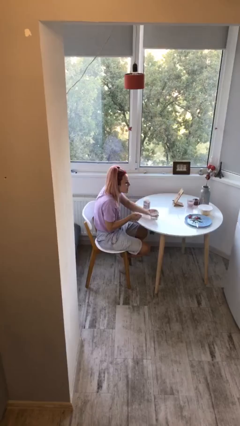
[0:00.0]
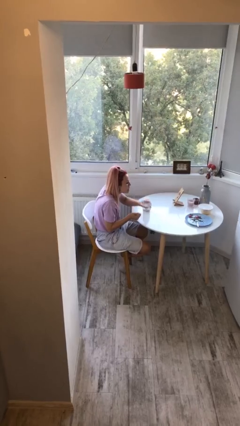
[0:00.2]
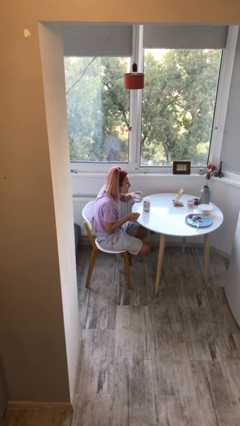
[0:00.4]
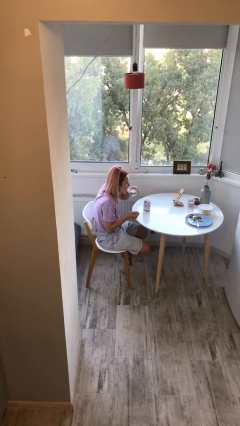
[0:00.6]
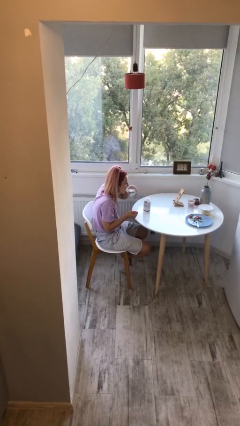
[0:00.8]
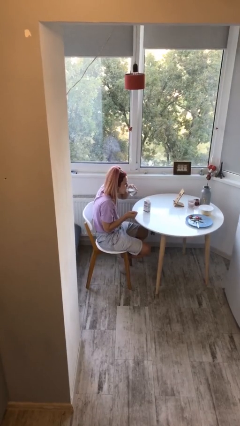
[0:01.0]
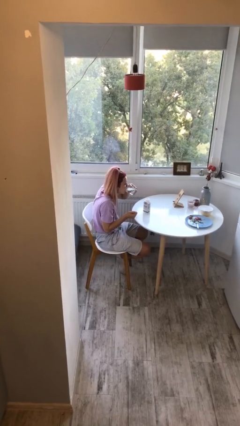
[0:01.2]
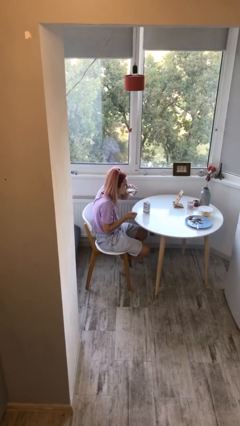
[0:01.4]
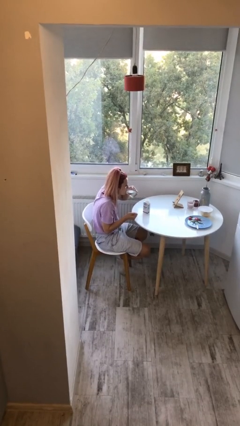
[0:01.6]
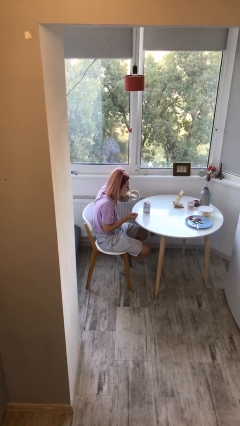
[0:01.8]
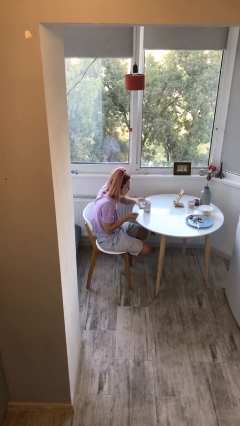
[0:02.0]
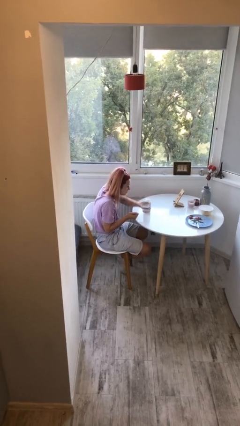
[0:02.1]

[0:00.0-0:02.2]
person drinks from cup

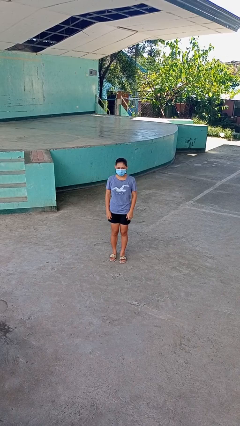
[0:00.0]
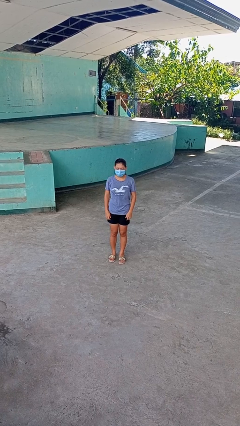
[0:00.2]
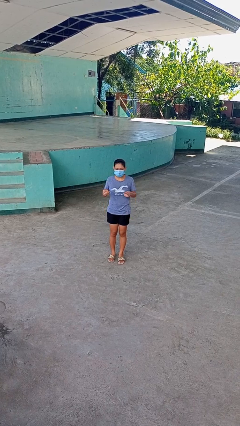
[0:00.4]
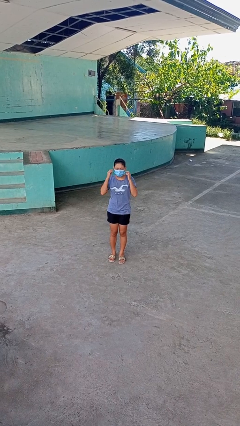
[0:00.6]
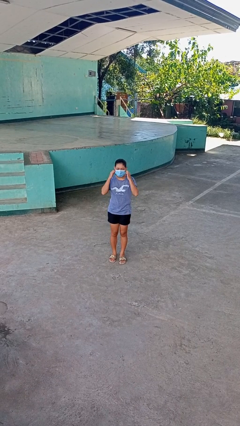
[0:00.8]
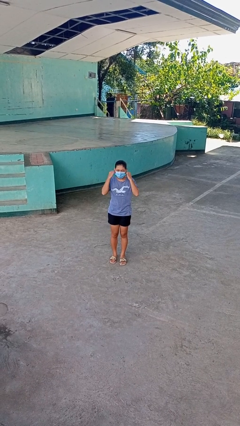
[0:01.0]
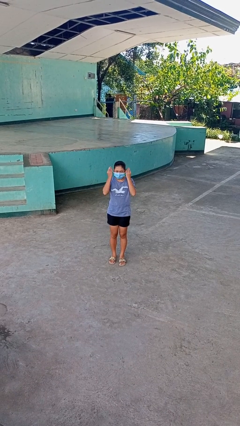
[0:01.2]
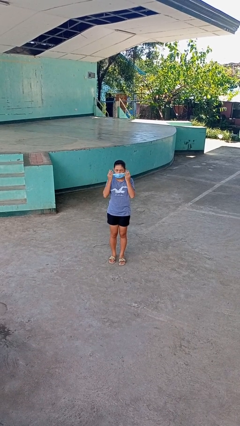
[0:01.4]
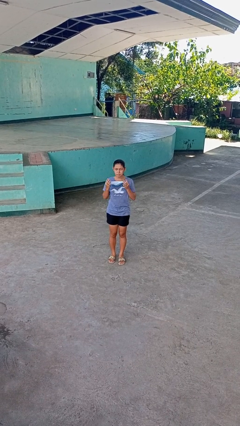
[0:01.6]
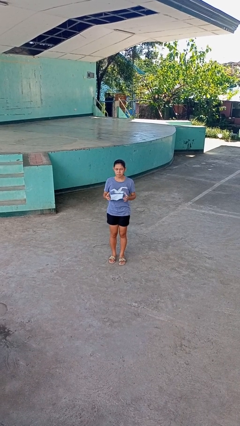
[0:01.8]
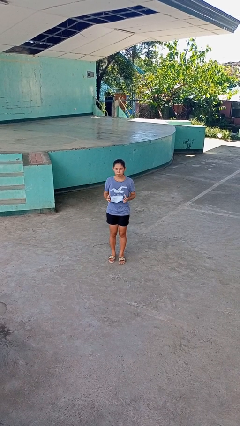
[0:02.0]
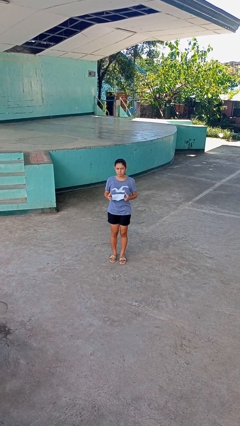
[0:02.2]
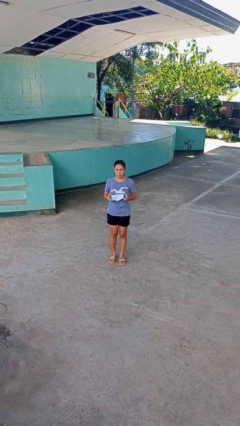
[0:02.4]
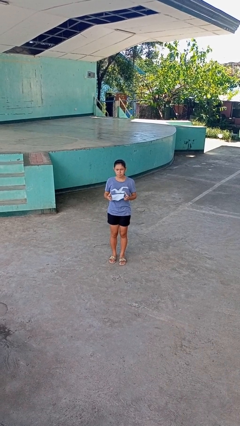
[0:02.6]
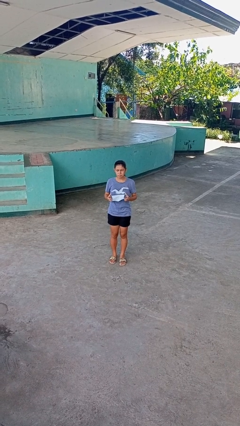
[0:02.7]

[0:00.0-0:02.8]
person takes off facemask

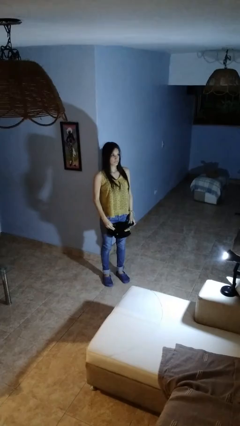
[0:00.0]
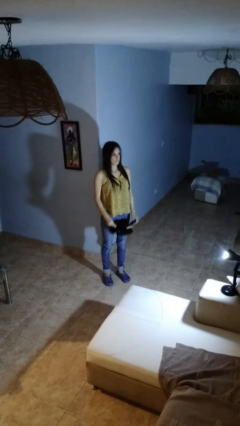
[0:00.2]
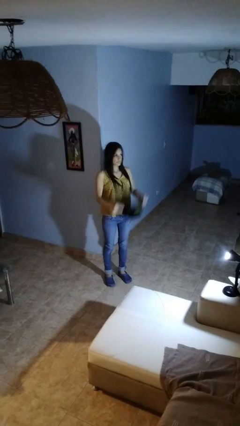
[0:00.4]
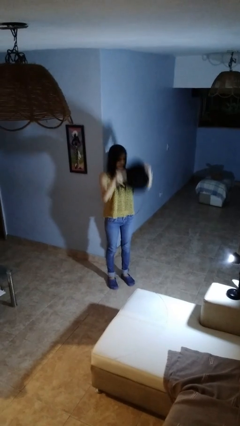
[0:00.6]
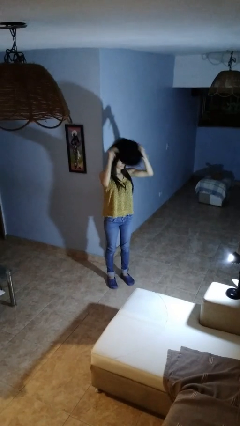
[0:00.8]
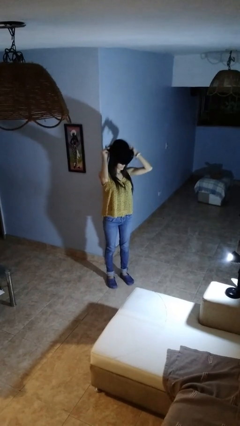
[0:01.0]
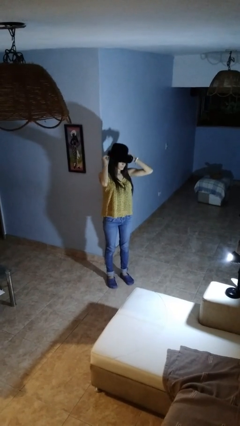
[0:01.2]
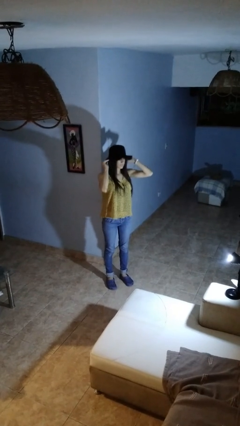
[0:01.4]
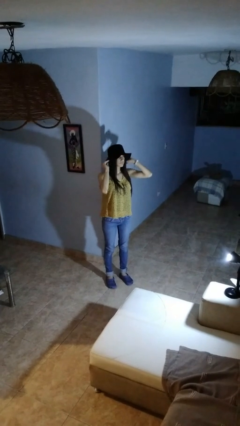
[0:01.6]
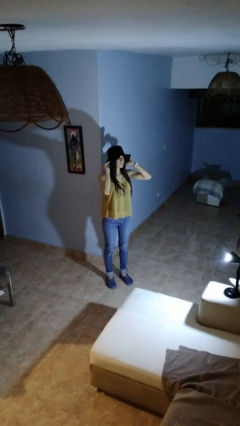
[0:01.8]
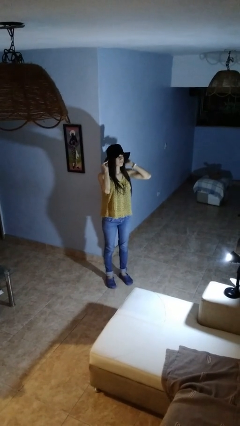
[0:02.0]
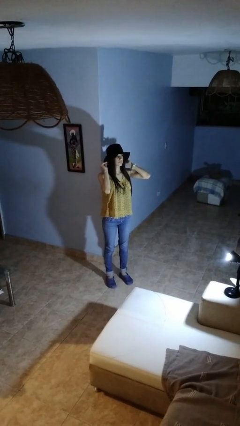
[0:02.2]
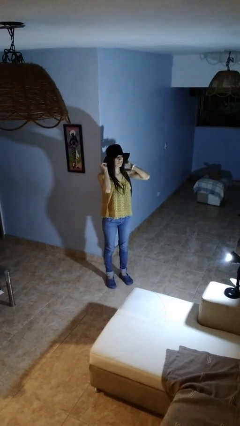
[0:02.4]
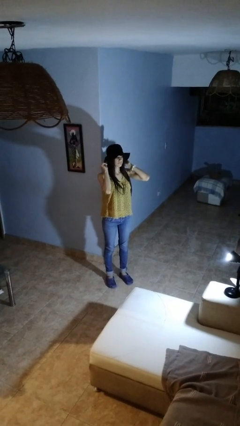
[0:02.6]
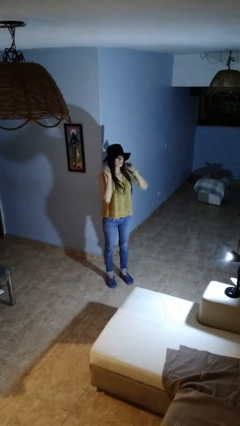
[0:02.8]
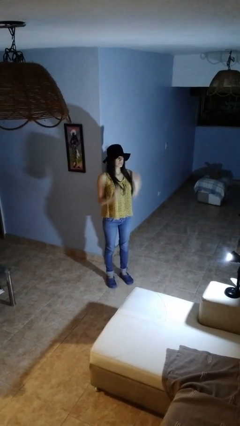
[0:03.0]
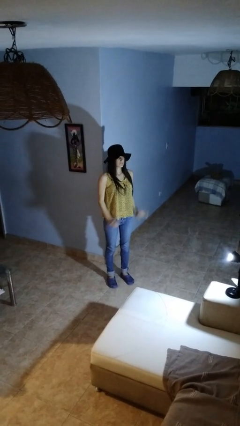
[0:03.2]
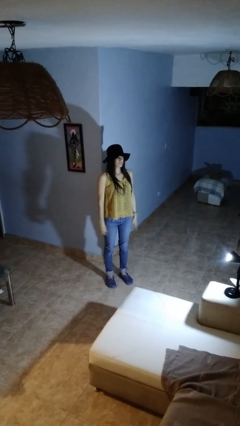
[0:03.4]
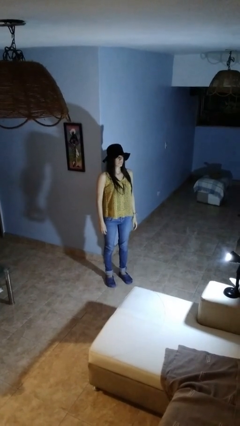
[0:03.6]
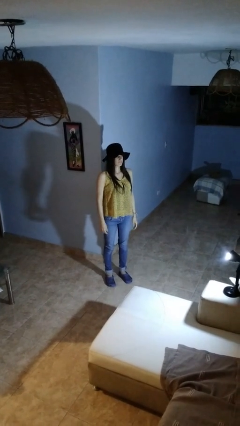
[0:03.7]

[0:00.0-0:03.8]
person puts on hat

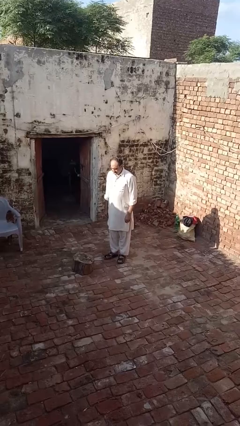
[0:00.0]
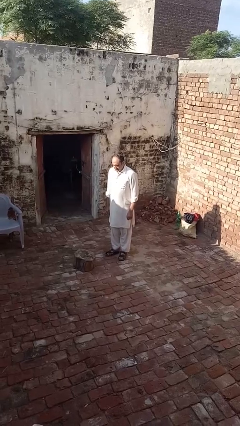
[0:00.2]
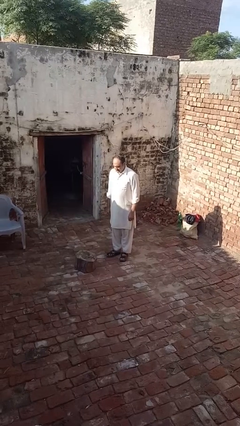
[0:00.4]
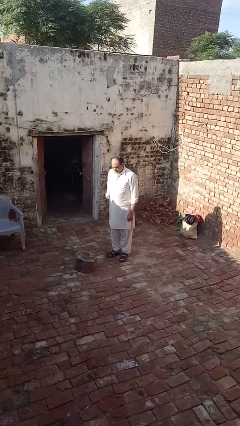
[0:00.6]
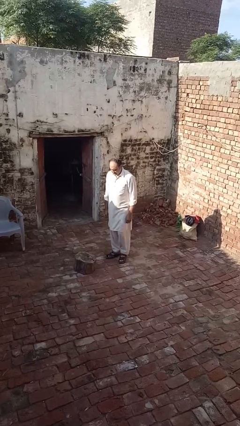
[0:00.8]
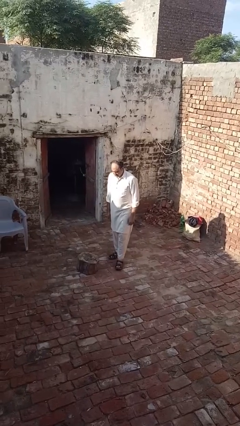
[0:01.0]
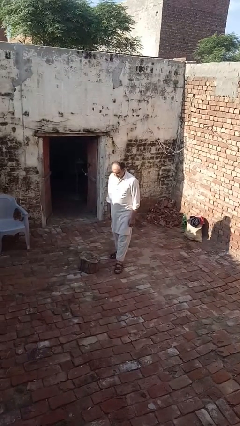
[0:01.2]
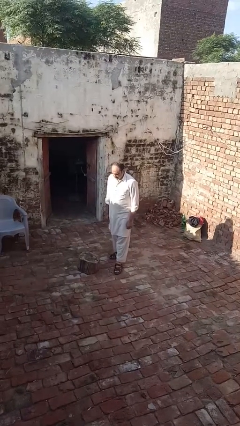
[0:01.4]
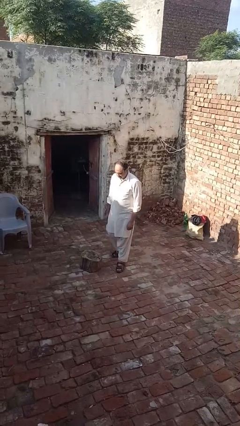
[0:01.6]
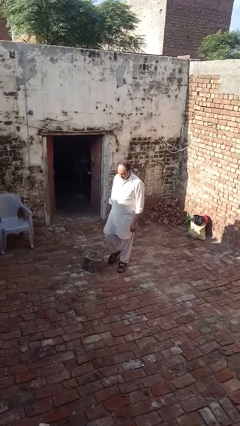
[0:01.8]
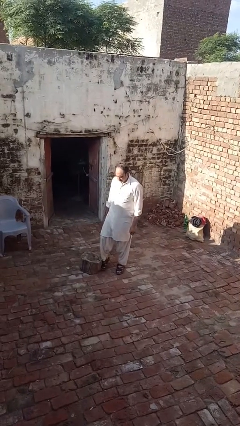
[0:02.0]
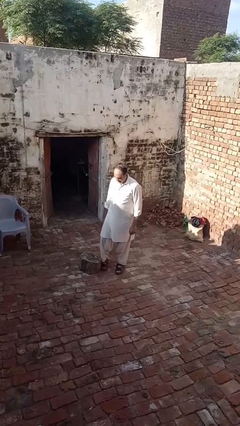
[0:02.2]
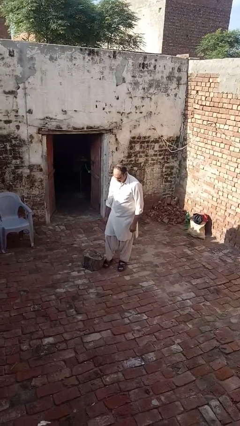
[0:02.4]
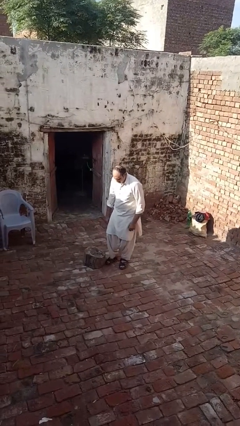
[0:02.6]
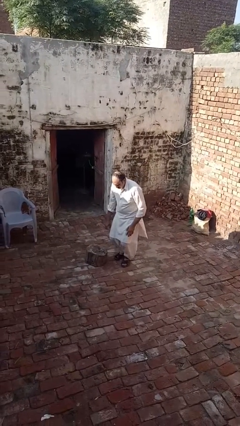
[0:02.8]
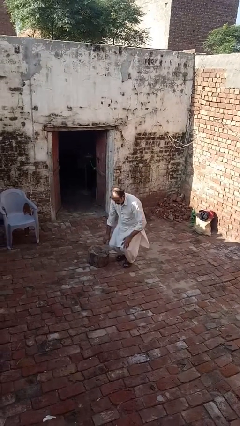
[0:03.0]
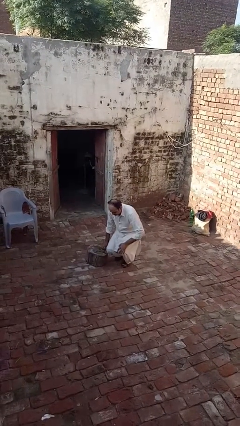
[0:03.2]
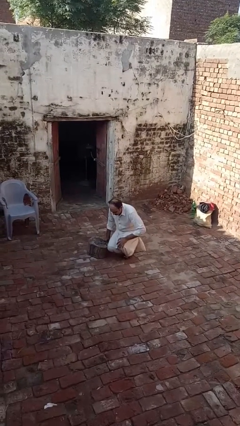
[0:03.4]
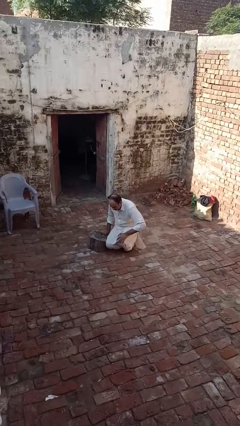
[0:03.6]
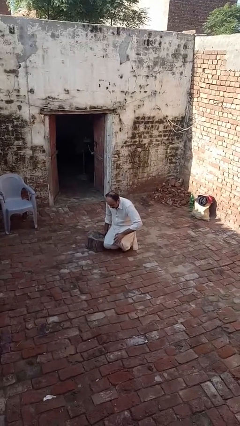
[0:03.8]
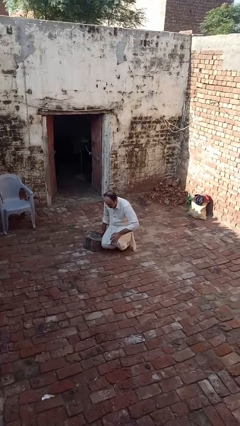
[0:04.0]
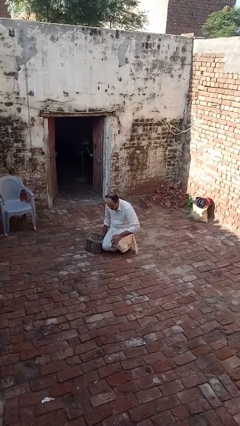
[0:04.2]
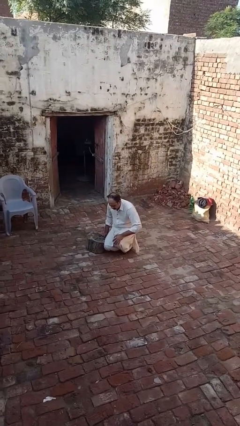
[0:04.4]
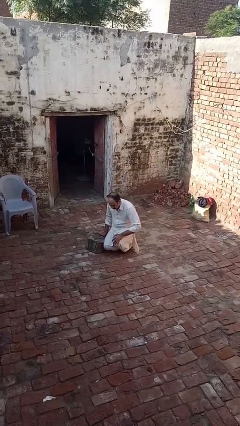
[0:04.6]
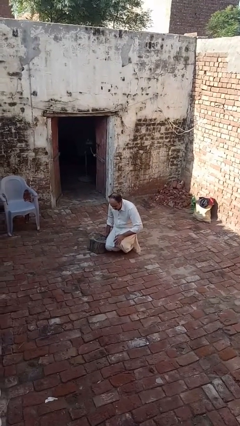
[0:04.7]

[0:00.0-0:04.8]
person trips on object on floor

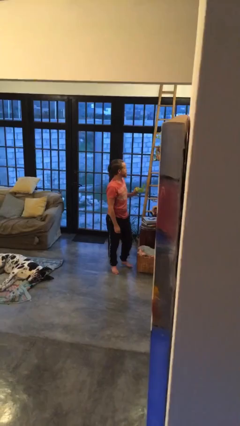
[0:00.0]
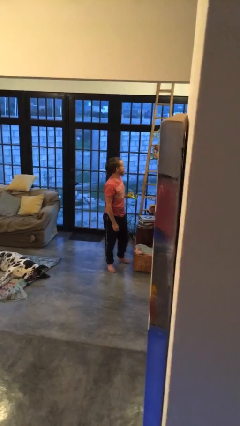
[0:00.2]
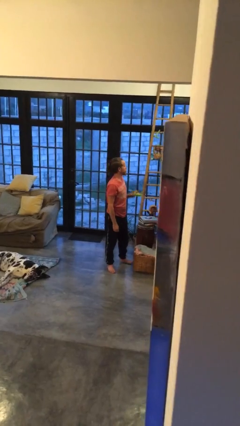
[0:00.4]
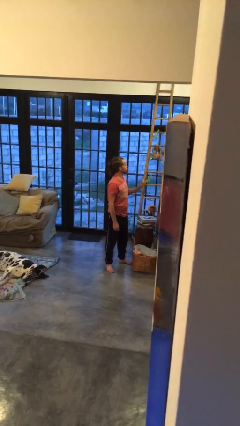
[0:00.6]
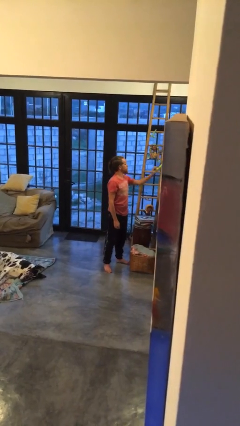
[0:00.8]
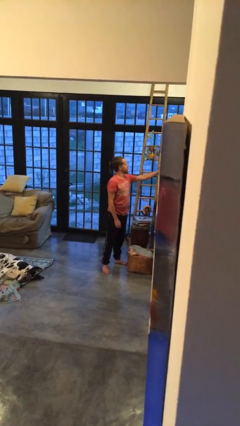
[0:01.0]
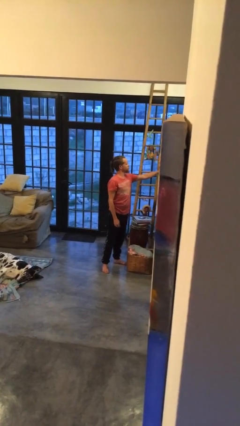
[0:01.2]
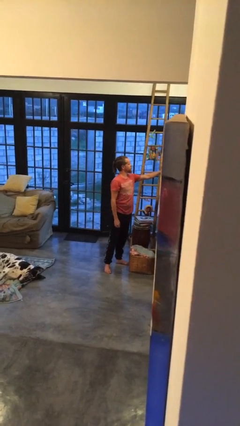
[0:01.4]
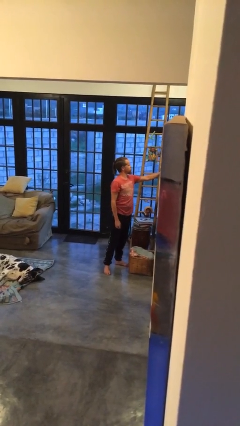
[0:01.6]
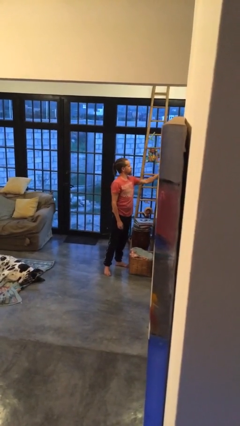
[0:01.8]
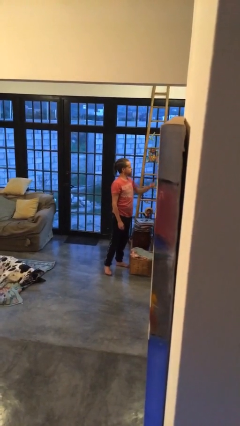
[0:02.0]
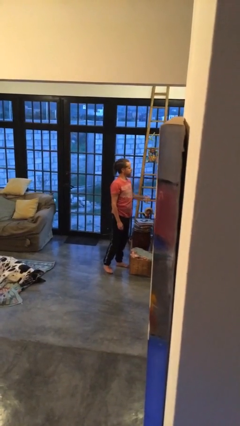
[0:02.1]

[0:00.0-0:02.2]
person puts down object on countertop

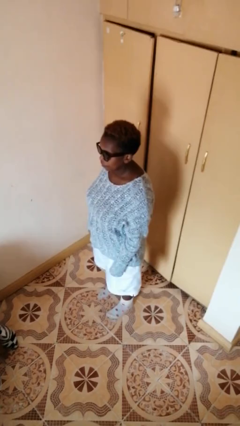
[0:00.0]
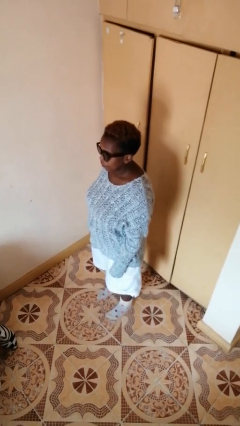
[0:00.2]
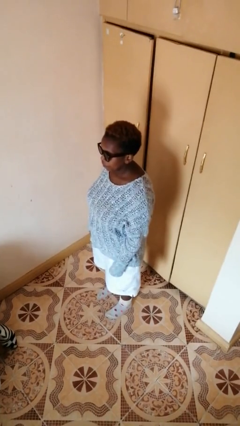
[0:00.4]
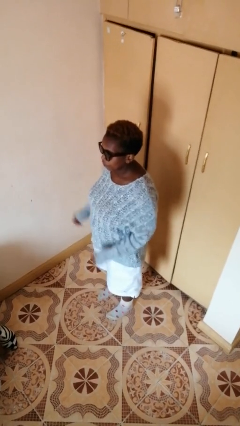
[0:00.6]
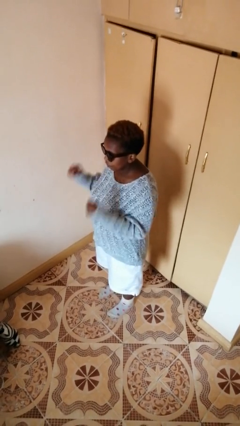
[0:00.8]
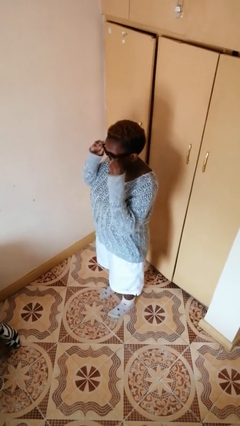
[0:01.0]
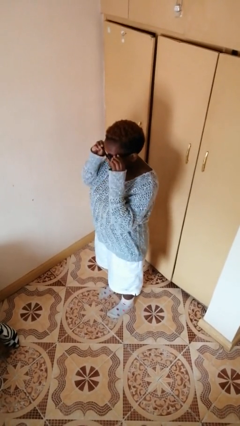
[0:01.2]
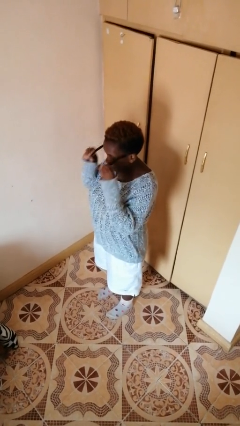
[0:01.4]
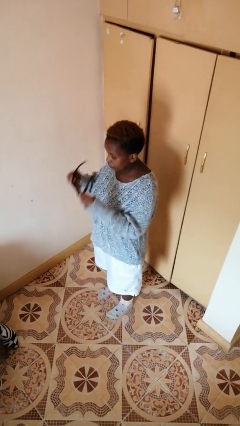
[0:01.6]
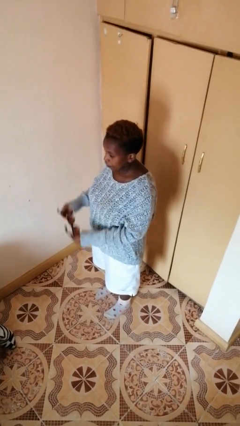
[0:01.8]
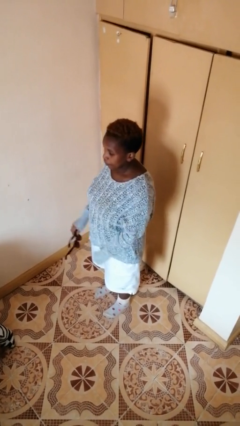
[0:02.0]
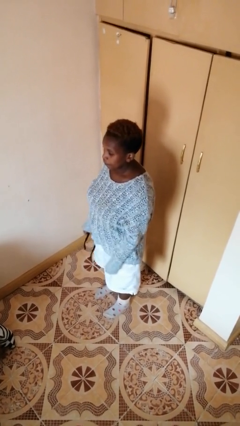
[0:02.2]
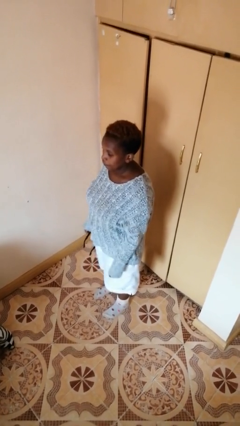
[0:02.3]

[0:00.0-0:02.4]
person takes off sunglasses
